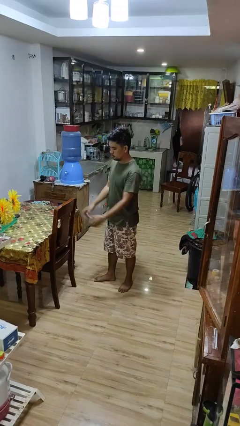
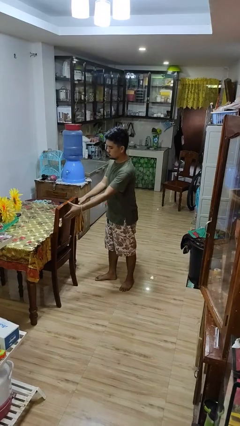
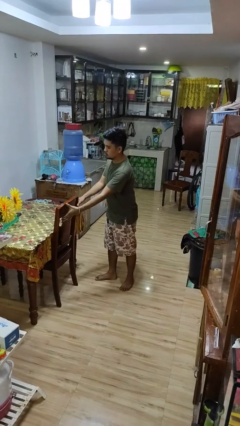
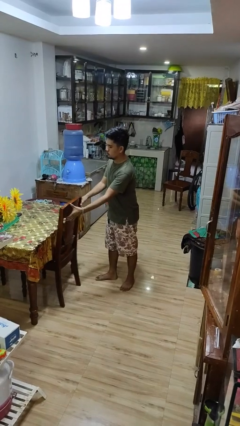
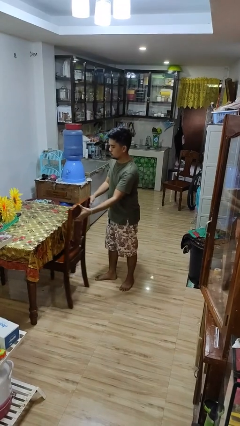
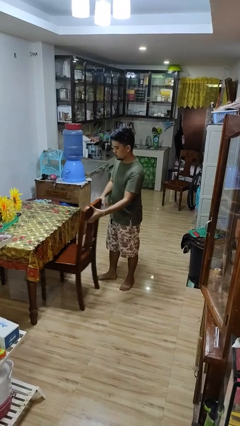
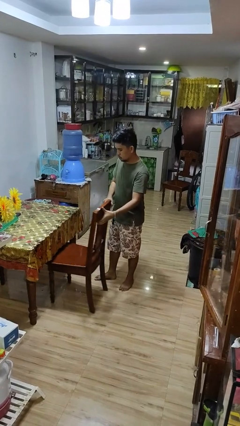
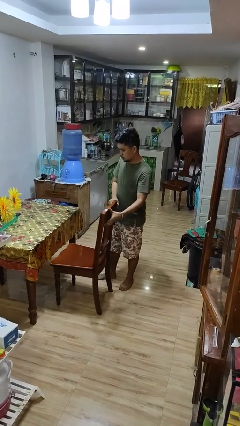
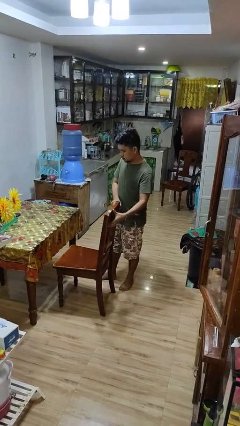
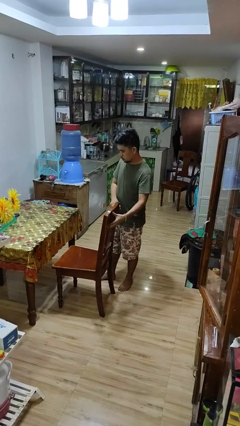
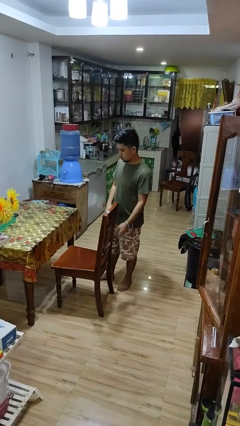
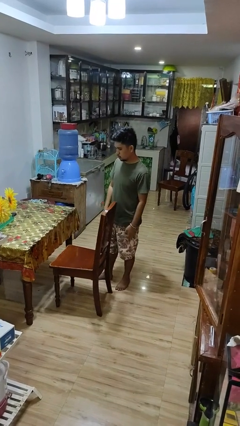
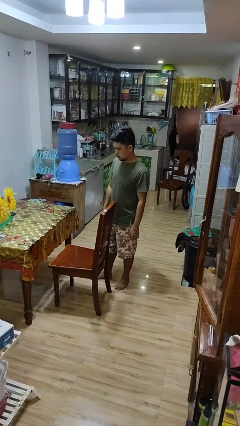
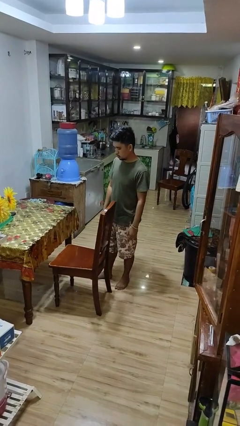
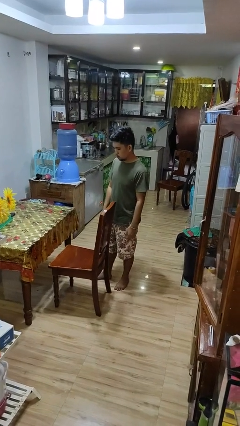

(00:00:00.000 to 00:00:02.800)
person pulls out chair

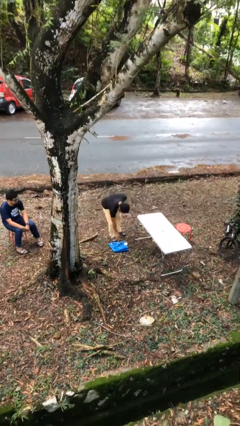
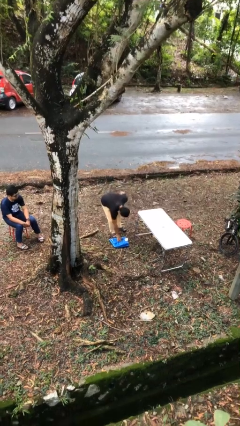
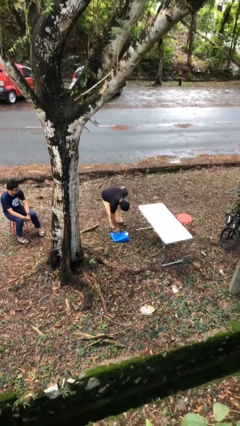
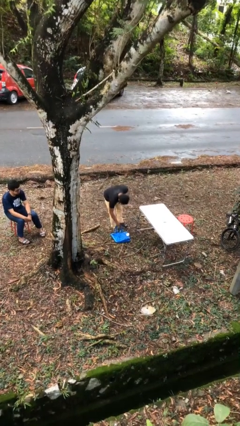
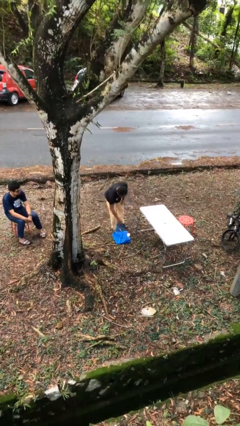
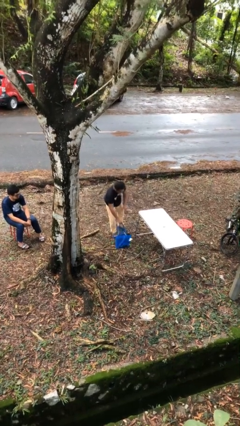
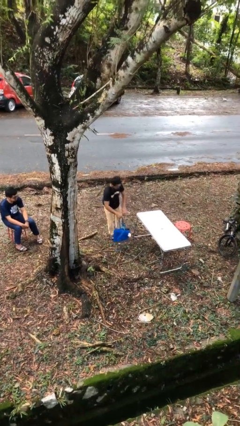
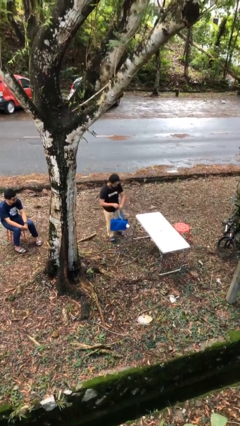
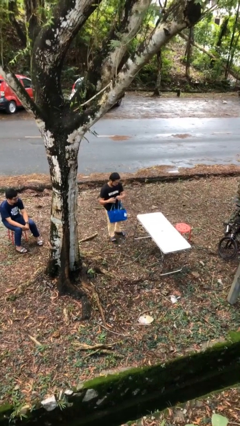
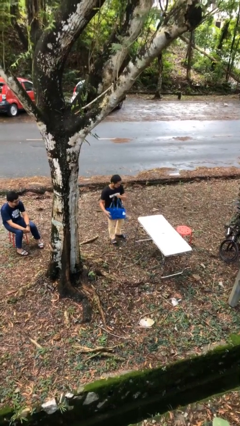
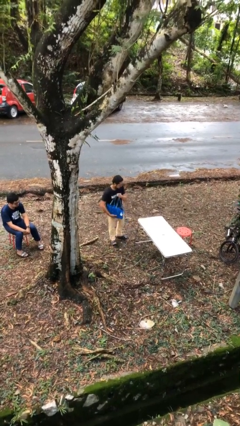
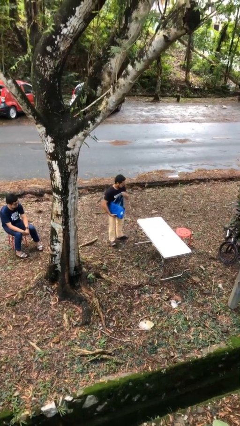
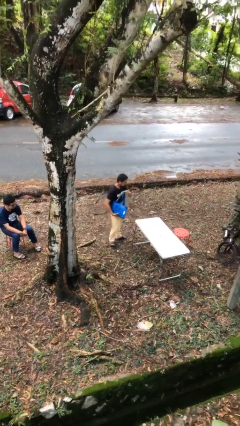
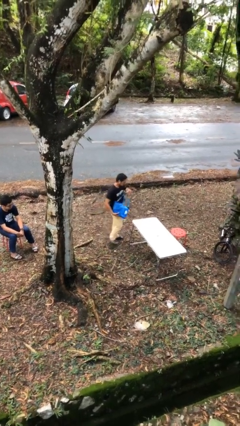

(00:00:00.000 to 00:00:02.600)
person picks up object from floor

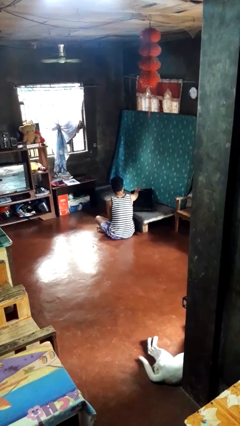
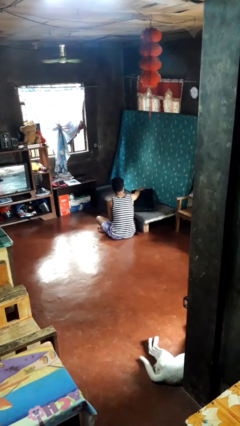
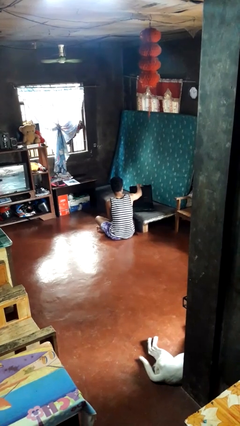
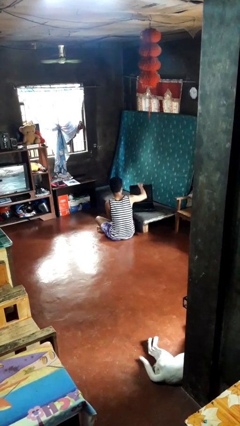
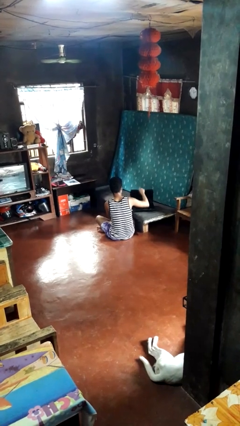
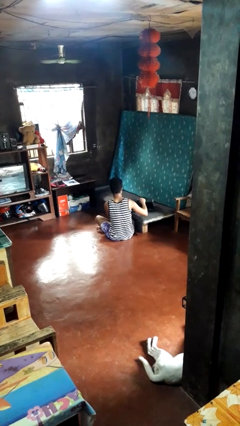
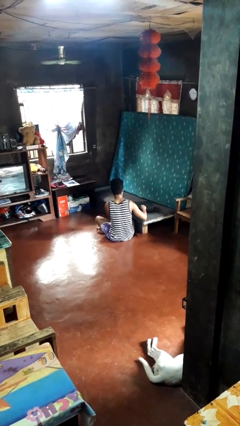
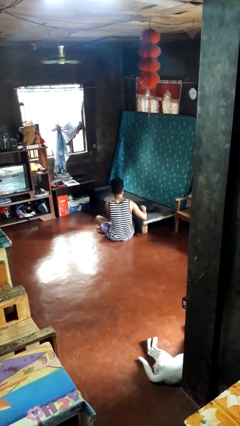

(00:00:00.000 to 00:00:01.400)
person closes suitcase

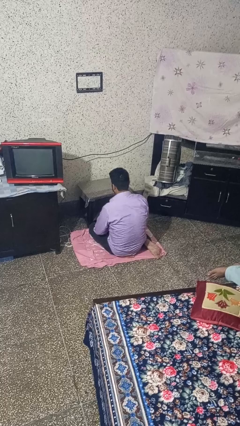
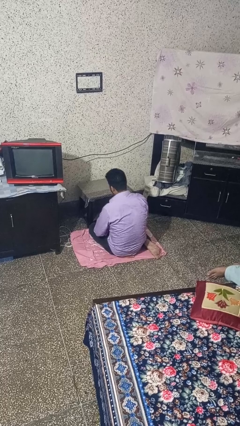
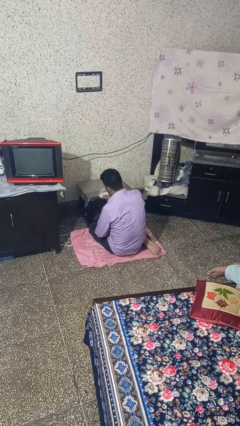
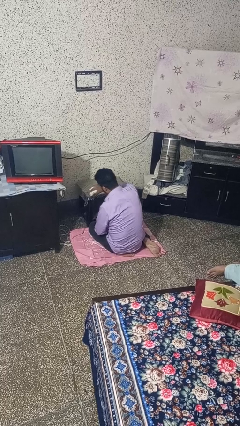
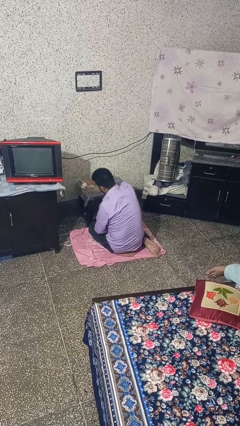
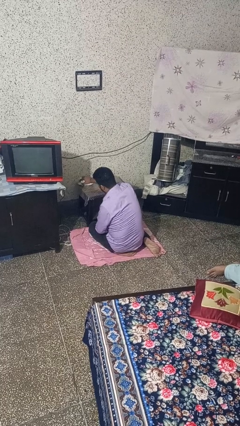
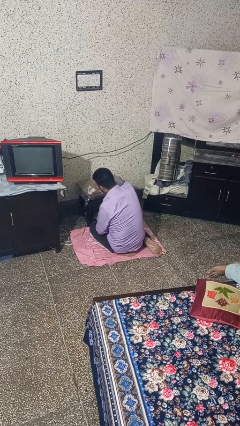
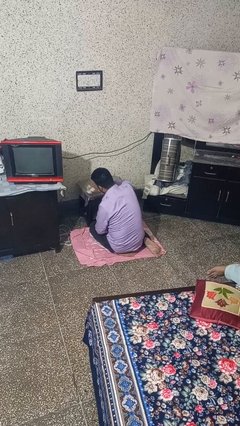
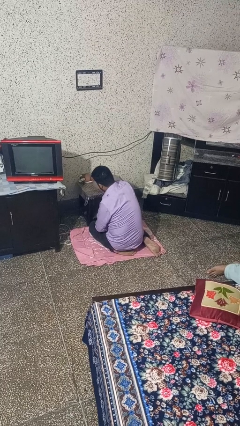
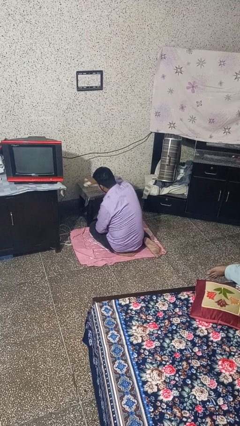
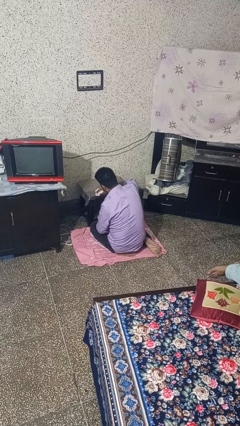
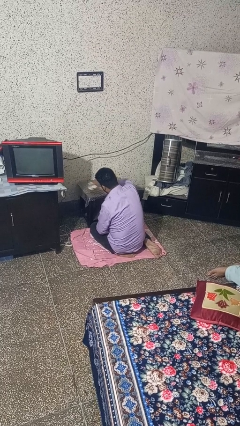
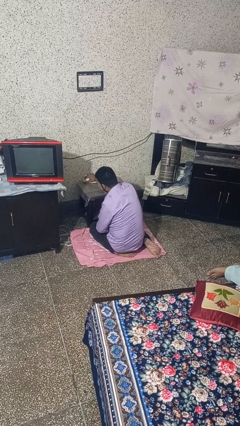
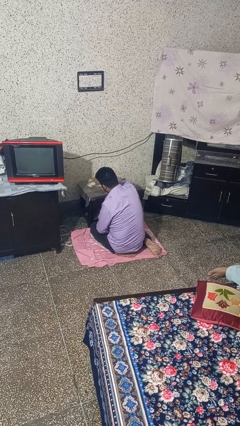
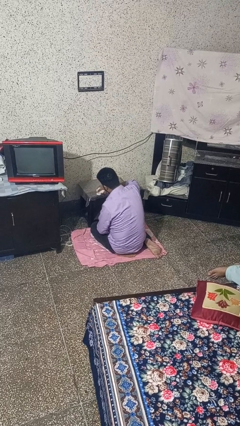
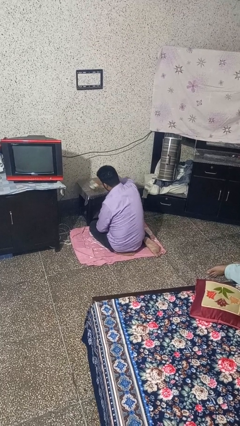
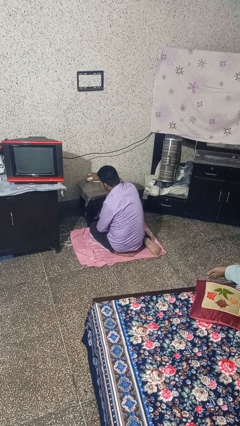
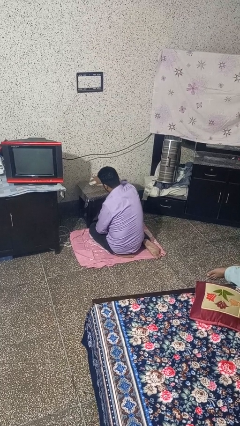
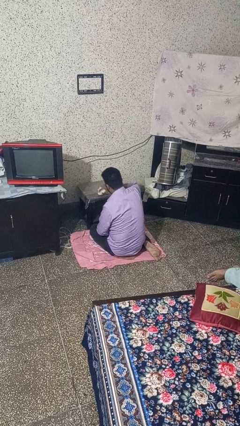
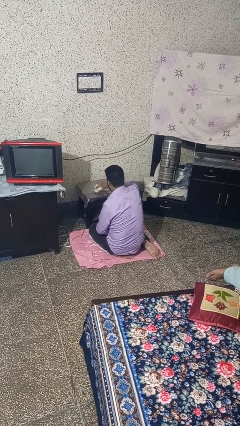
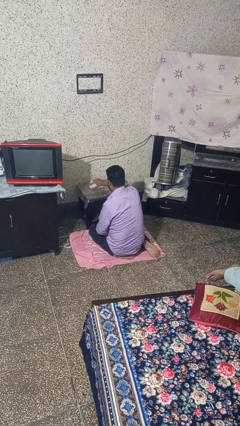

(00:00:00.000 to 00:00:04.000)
person cleans table with rag

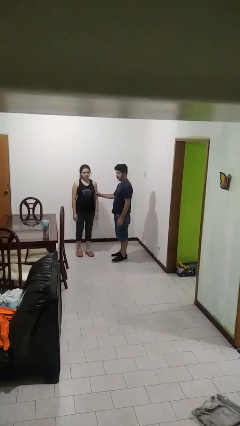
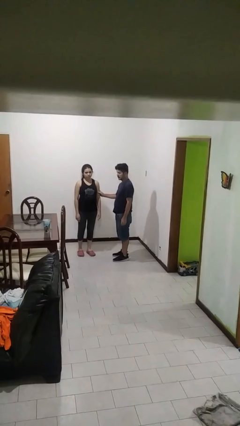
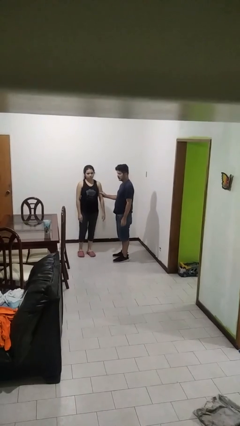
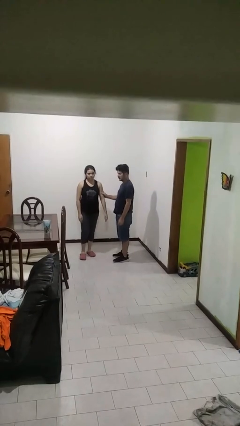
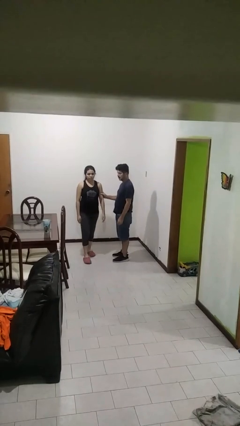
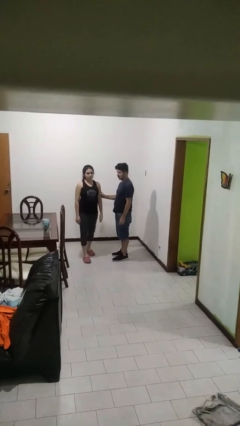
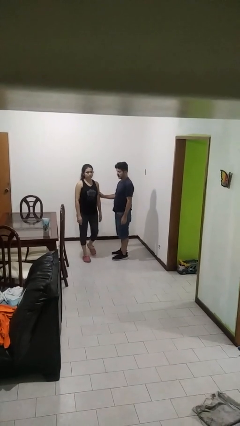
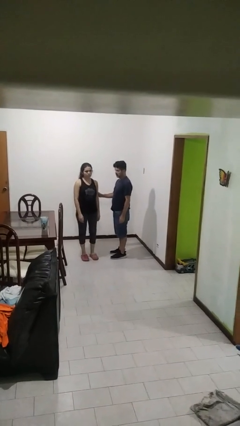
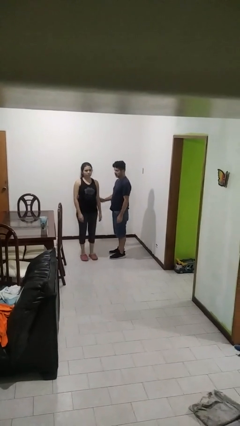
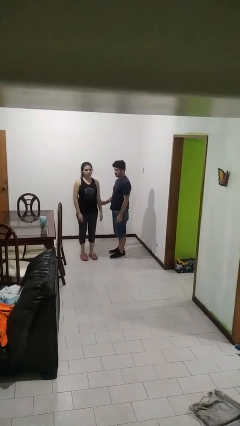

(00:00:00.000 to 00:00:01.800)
person grabs person by bicep

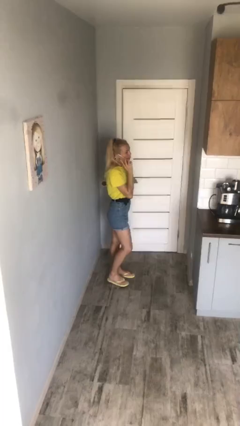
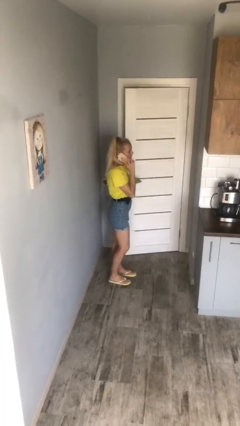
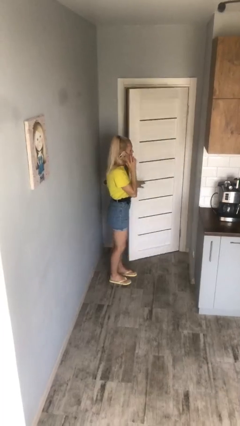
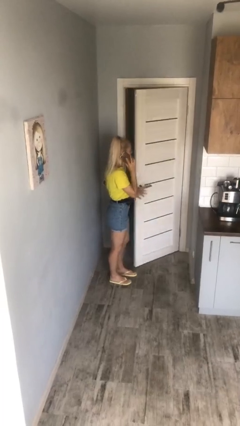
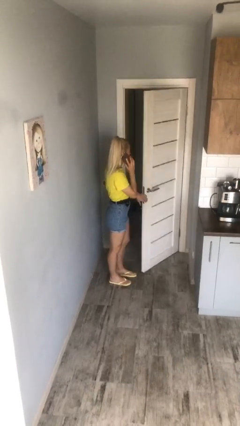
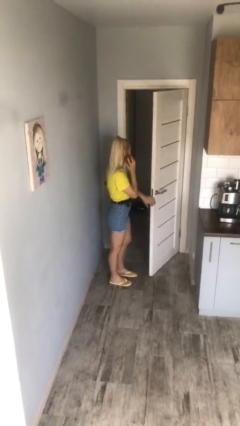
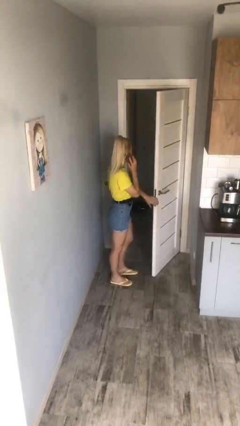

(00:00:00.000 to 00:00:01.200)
person opens facility door

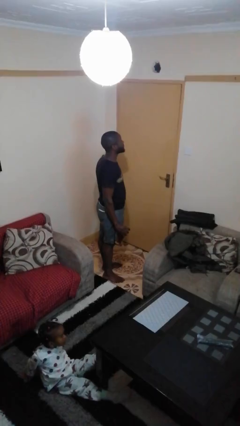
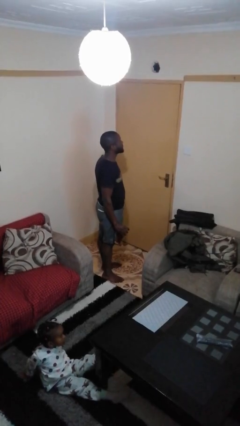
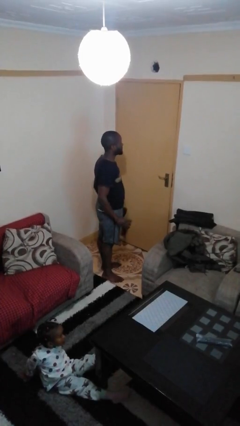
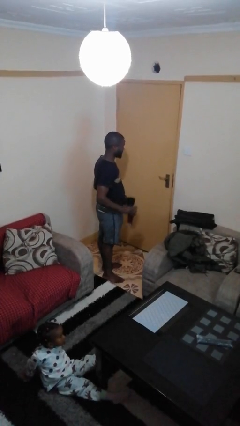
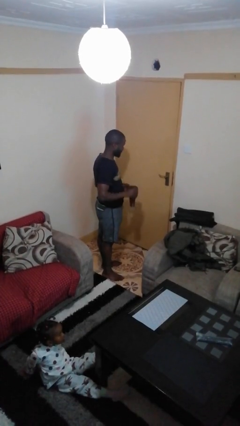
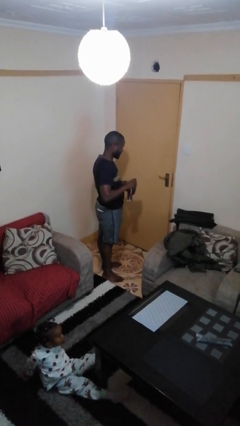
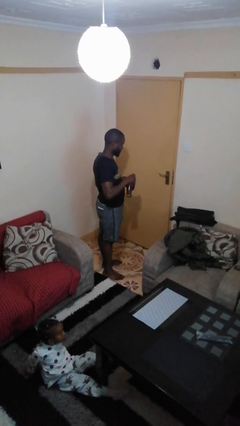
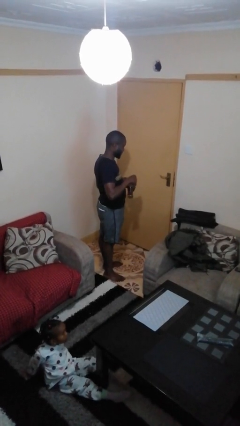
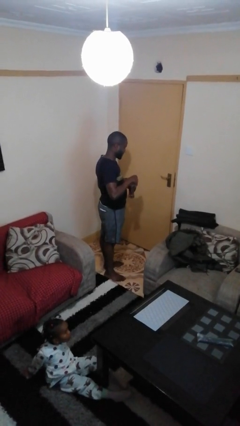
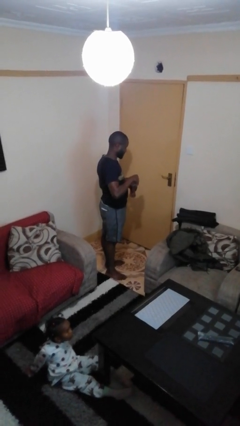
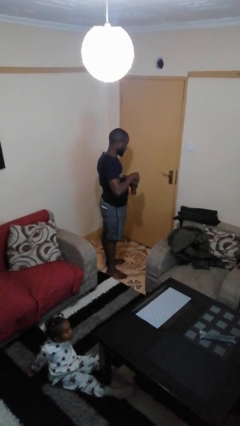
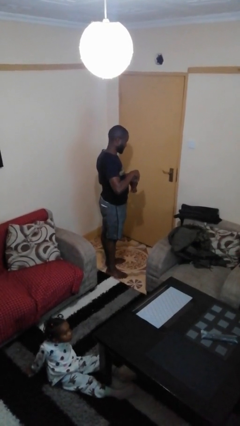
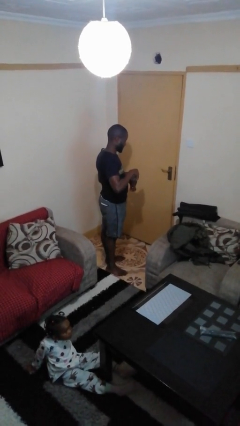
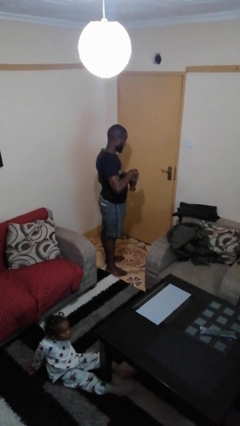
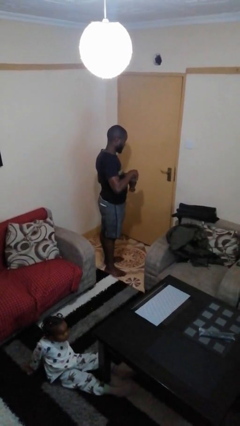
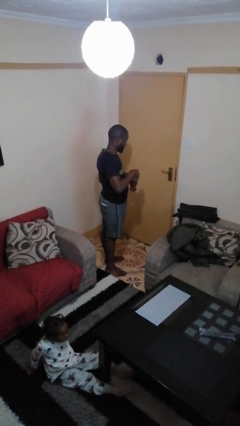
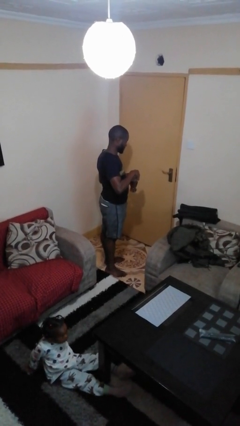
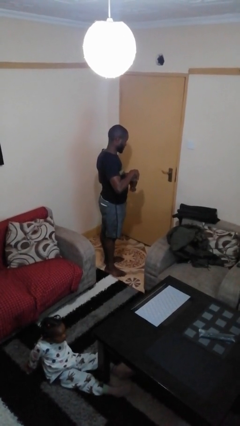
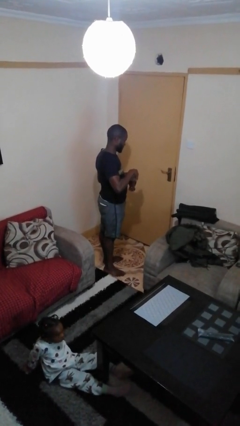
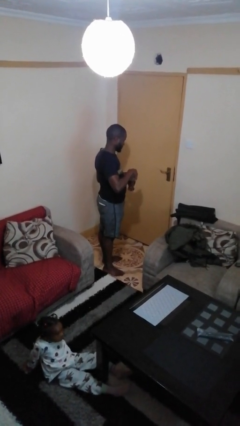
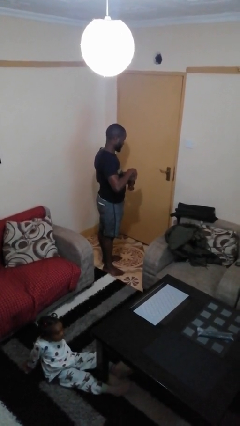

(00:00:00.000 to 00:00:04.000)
person pours coffee into mug
